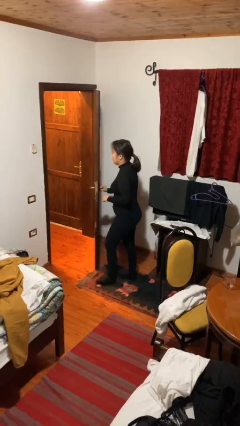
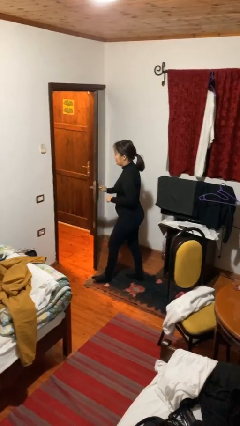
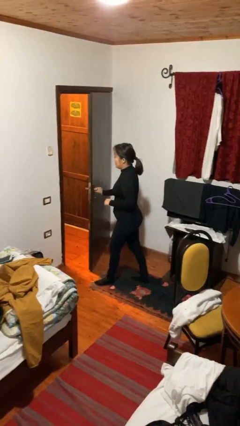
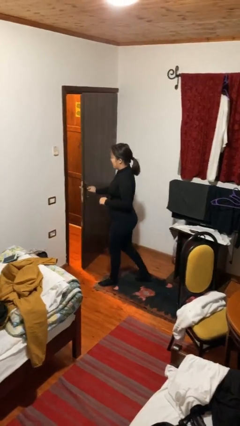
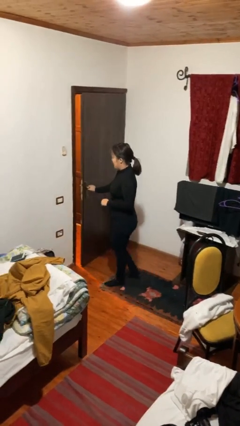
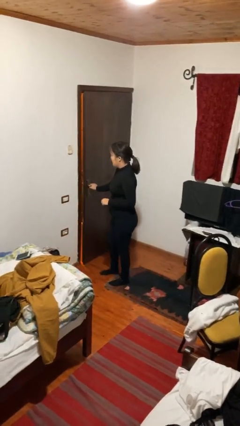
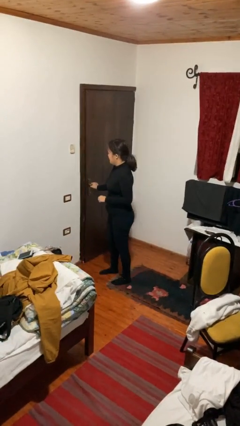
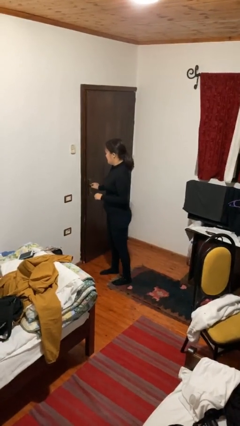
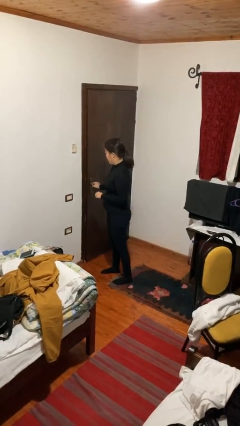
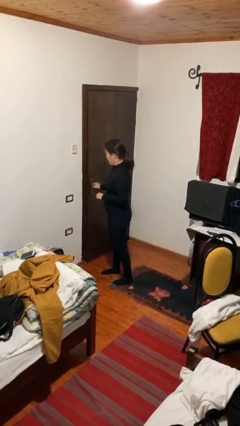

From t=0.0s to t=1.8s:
person closes facility door

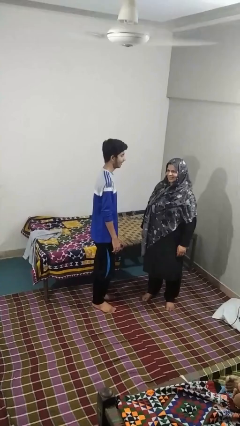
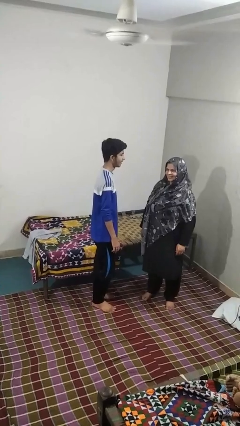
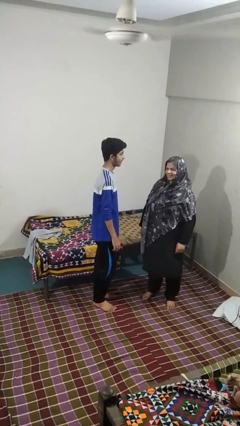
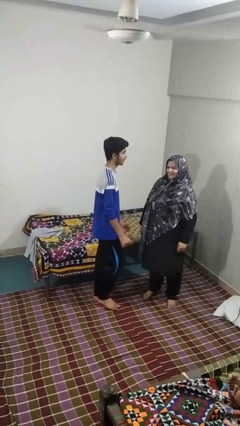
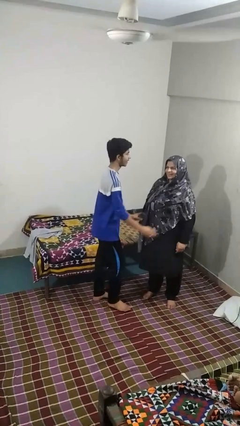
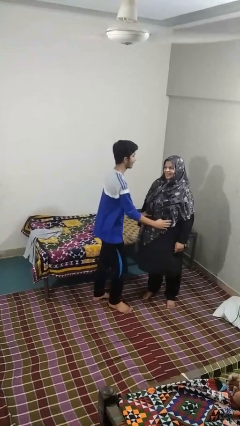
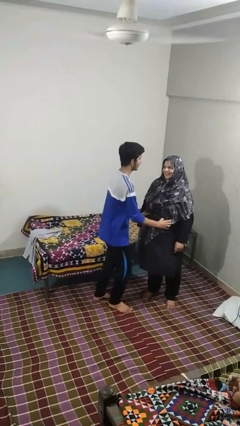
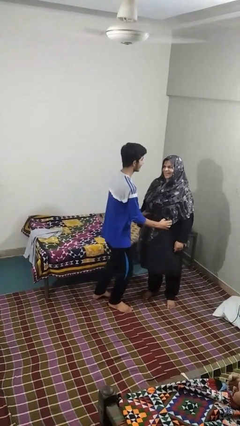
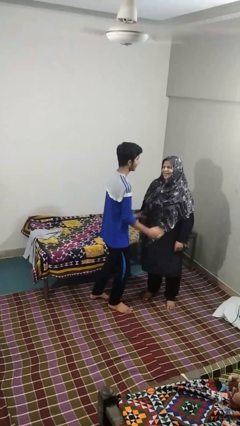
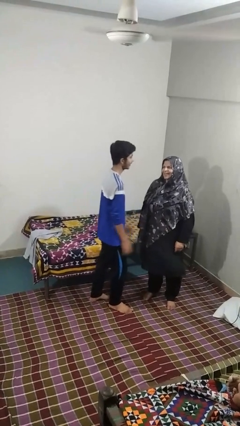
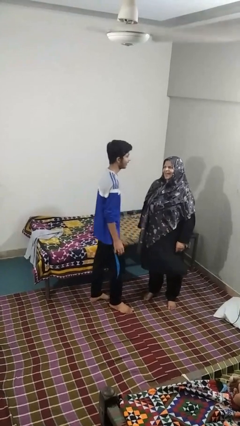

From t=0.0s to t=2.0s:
person tickles person

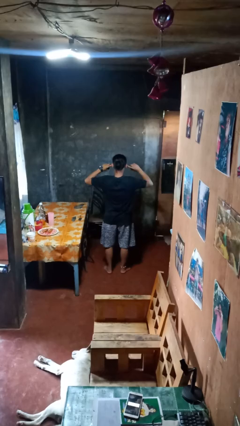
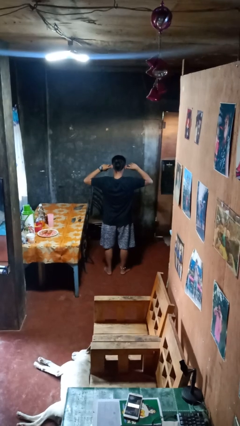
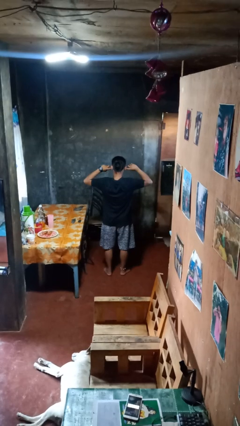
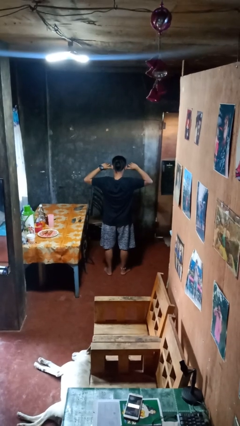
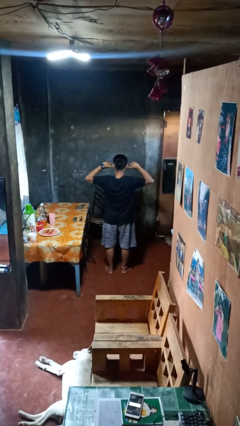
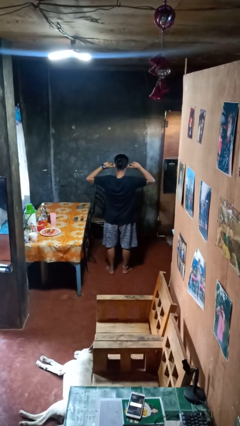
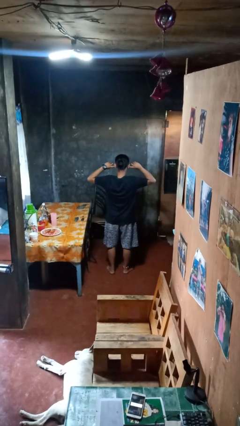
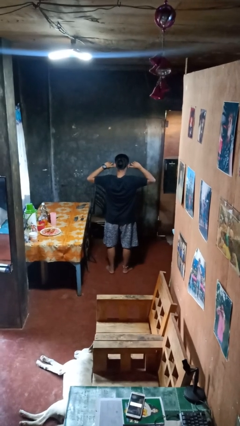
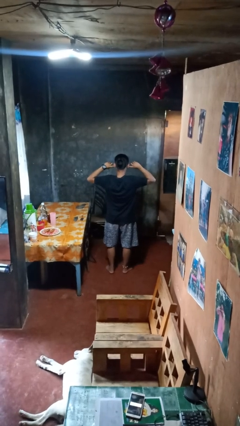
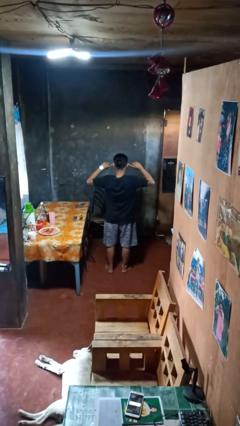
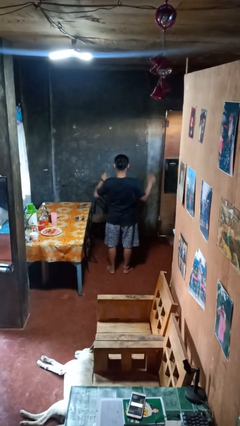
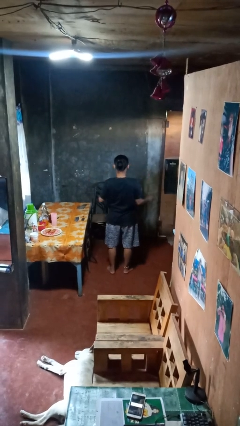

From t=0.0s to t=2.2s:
person puts fingers in ear

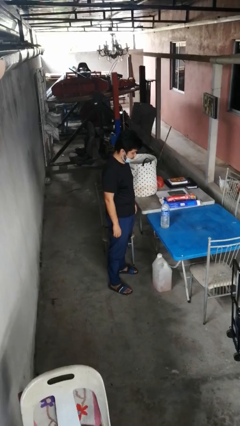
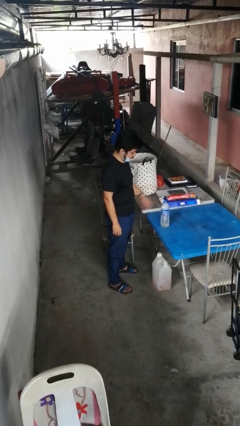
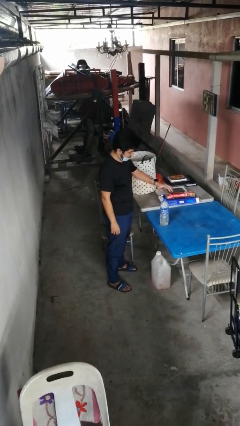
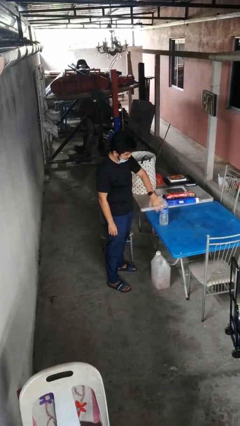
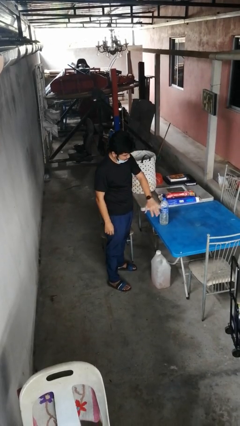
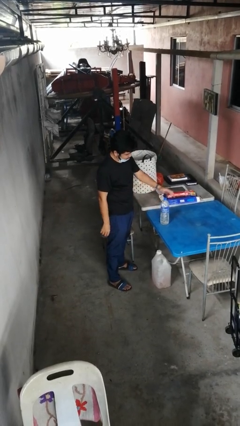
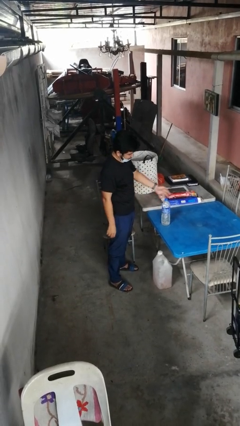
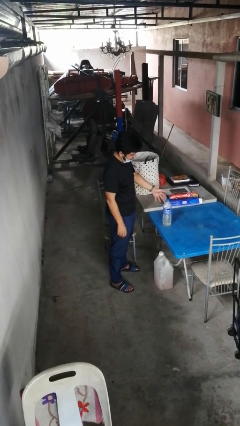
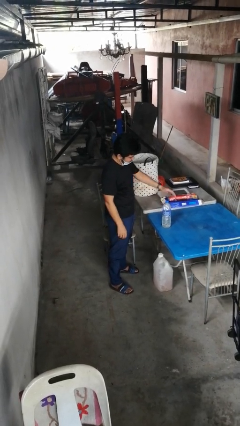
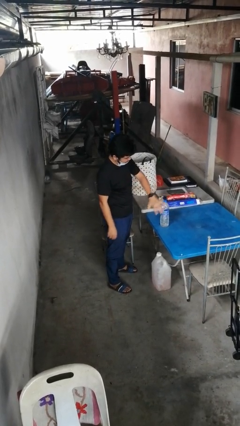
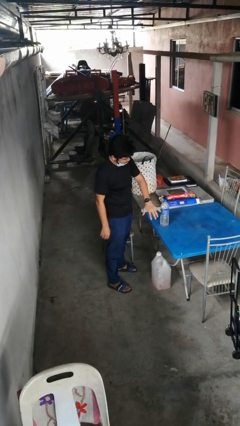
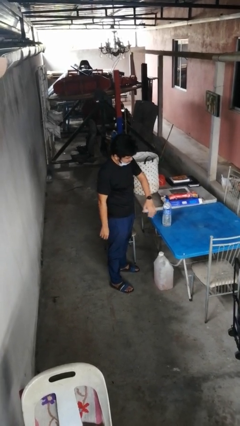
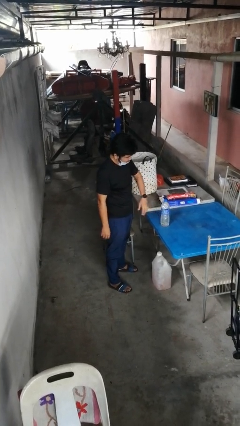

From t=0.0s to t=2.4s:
person waves hand over object

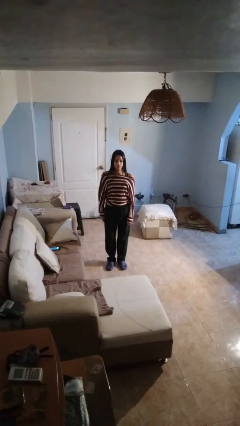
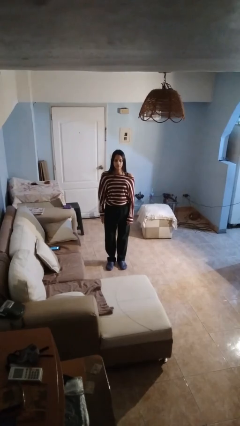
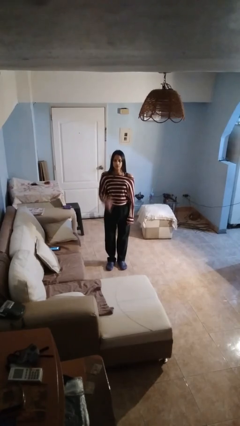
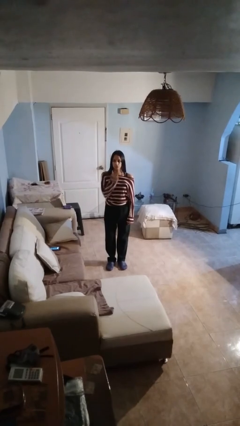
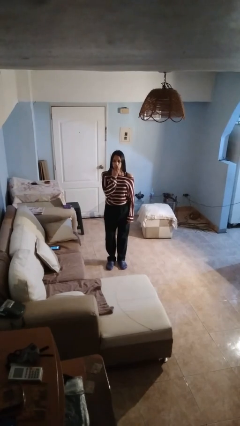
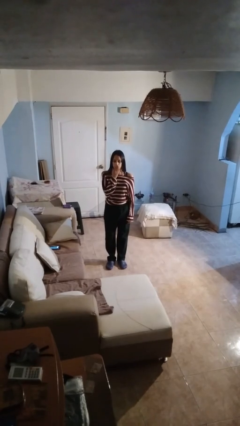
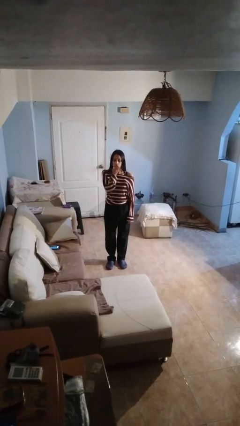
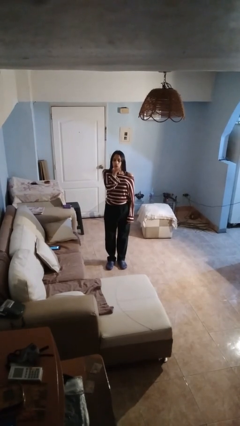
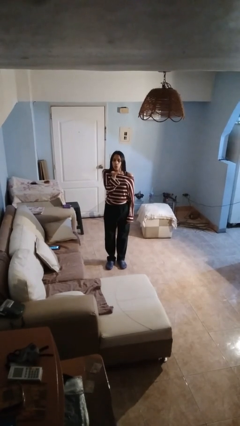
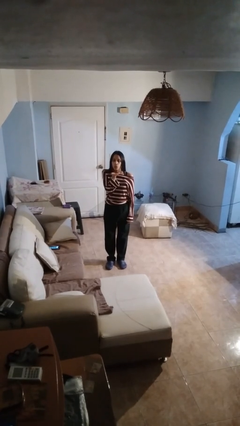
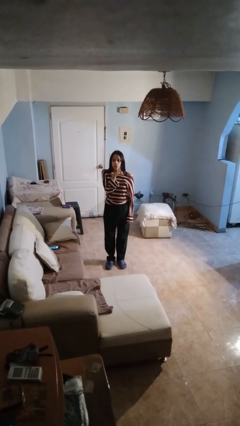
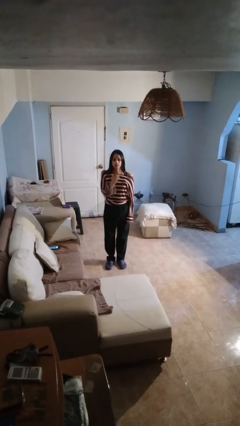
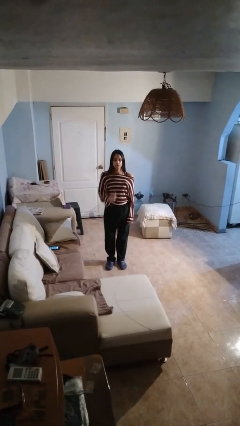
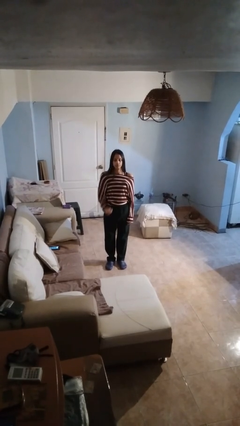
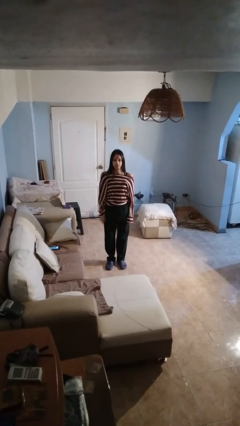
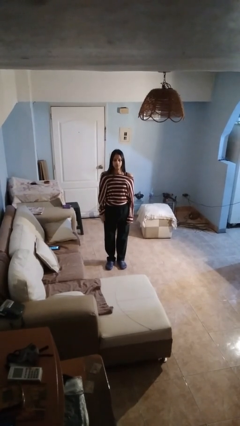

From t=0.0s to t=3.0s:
person gestures blow kiss

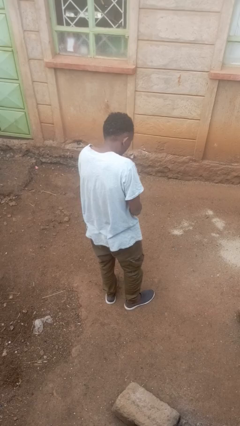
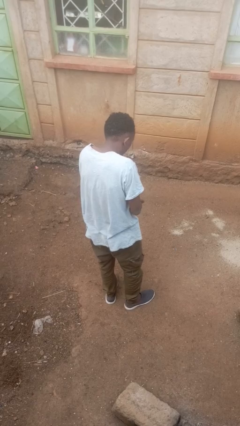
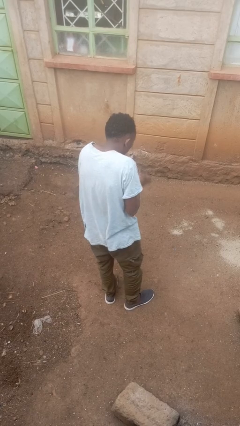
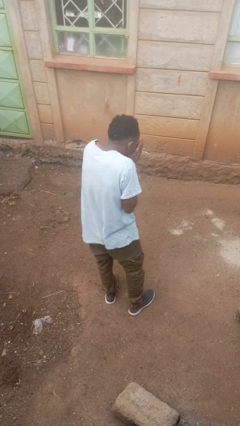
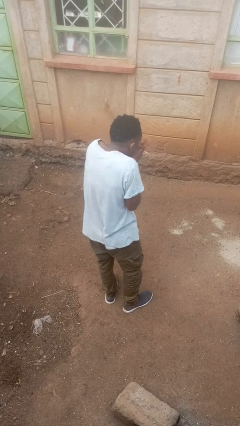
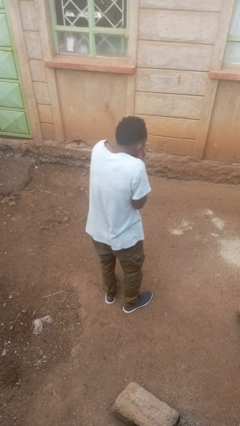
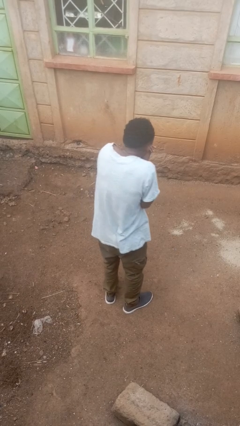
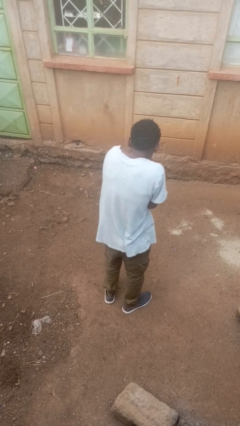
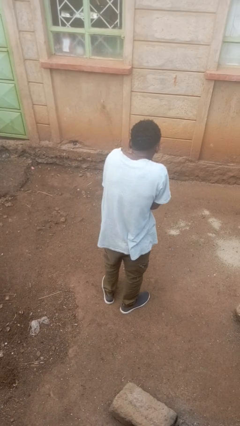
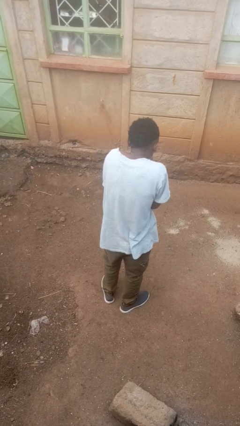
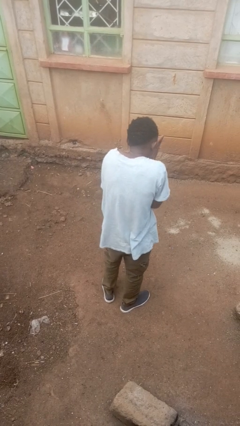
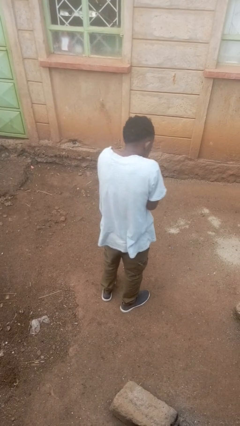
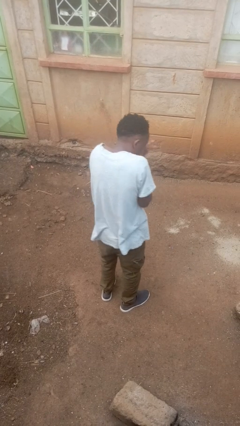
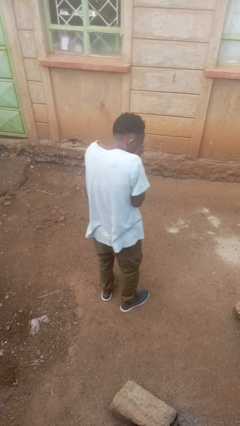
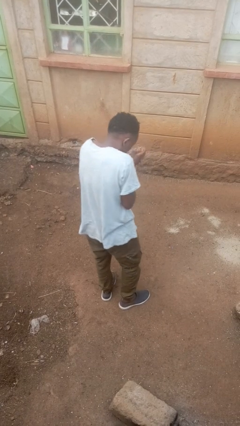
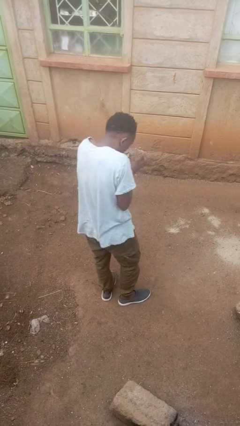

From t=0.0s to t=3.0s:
person blows into hands

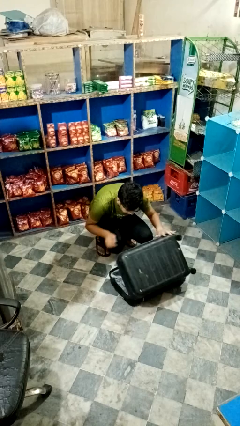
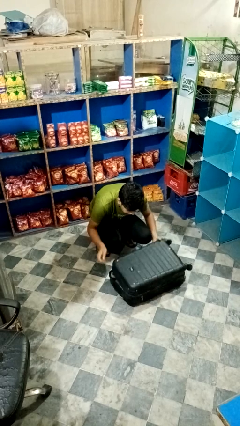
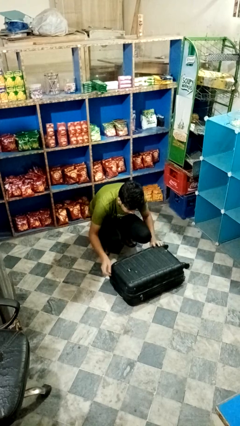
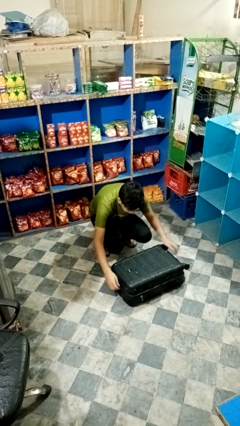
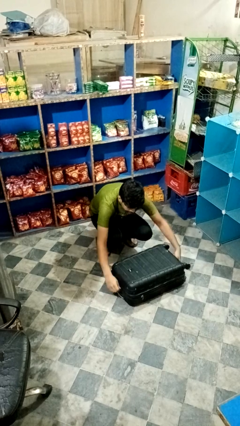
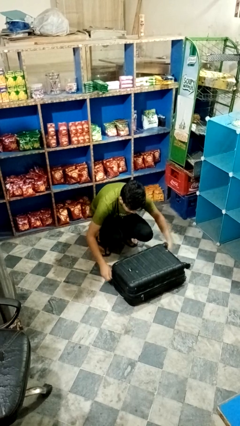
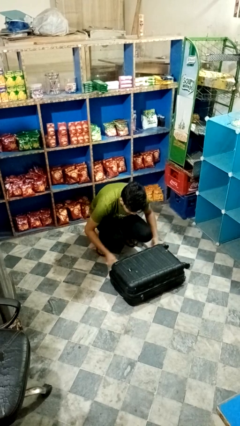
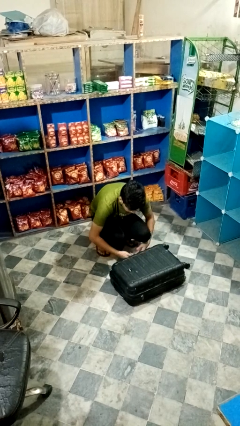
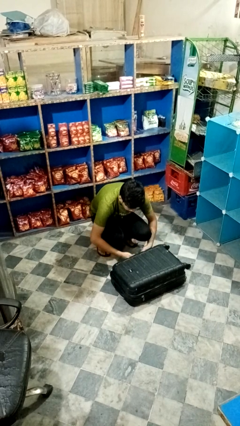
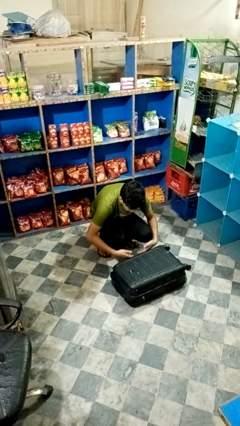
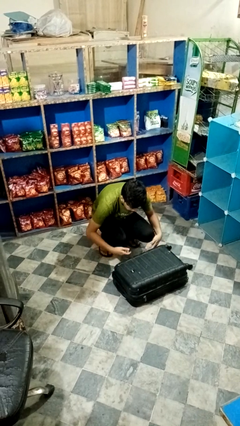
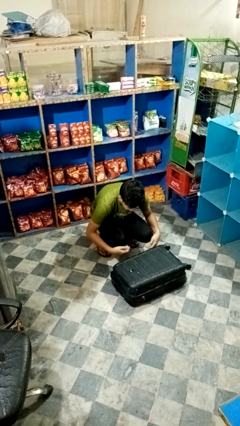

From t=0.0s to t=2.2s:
person closes suitcase
